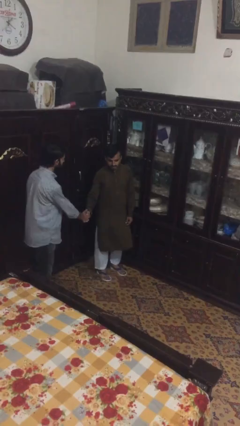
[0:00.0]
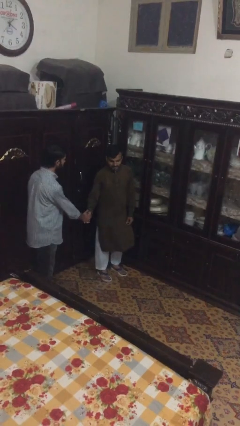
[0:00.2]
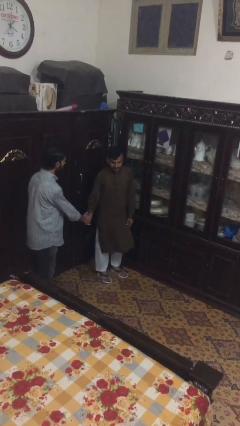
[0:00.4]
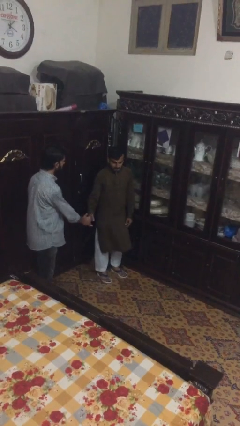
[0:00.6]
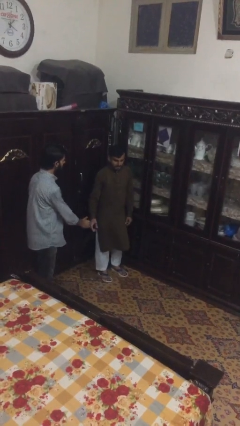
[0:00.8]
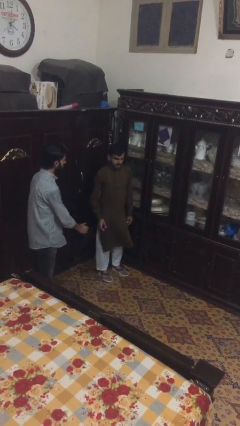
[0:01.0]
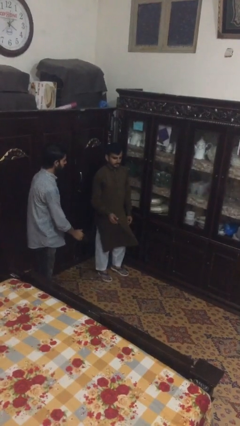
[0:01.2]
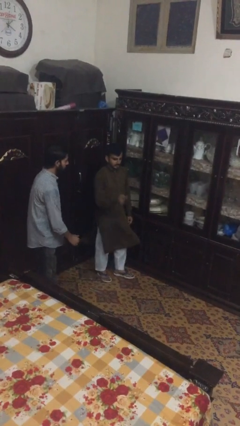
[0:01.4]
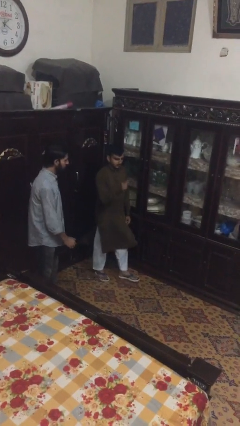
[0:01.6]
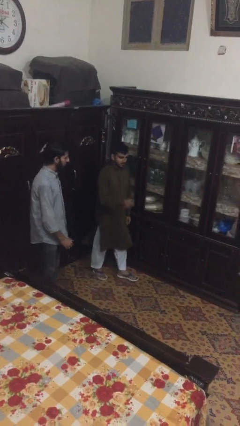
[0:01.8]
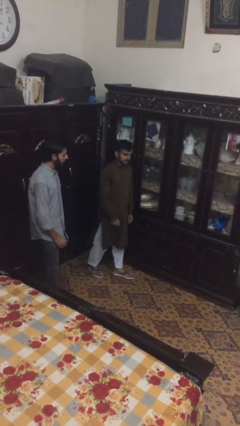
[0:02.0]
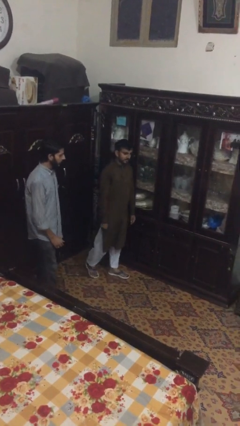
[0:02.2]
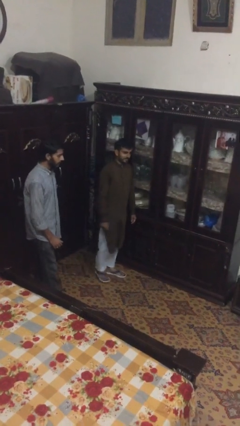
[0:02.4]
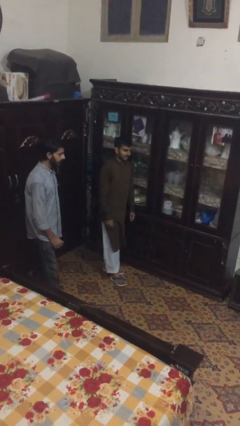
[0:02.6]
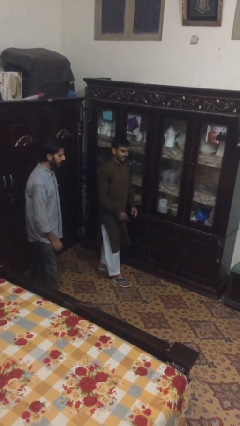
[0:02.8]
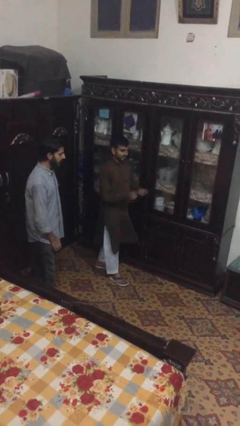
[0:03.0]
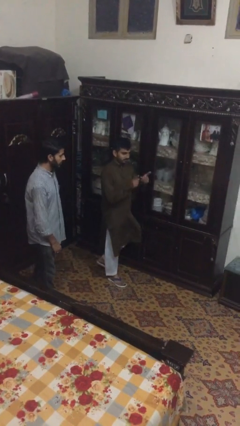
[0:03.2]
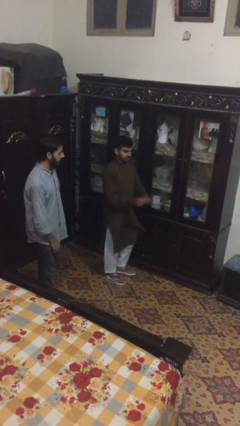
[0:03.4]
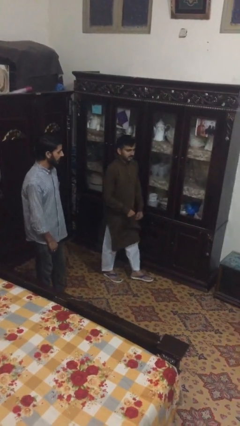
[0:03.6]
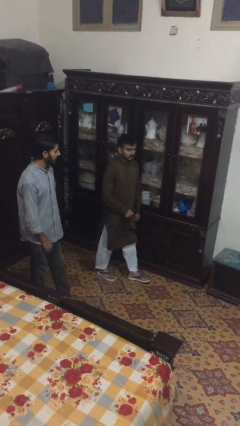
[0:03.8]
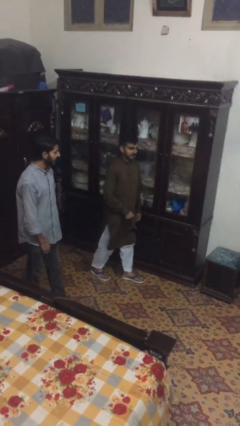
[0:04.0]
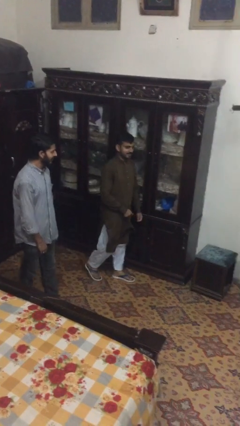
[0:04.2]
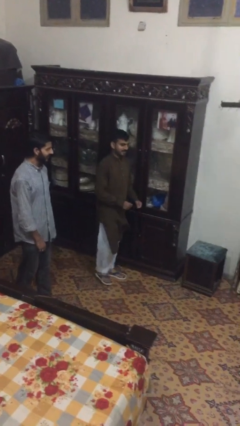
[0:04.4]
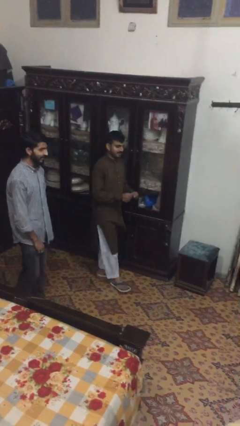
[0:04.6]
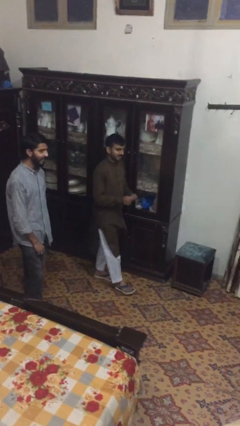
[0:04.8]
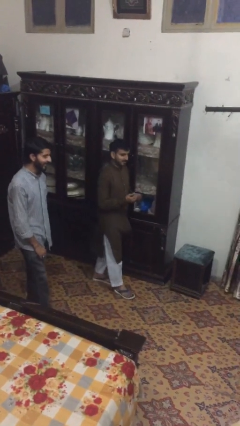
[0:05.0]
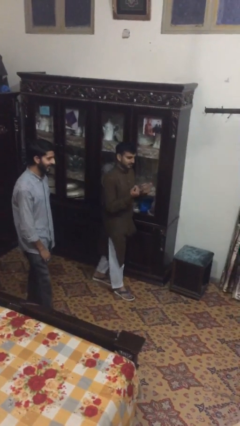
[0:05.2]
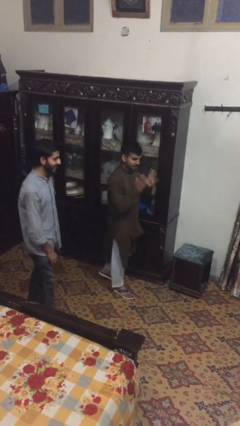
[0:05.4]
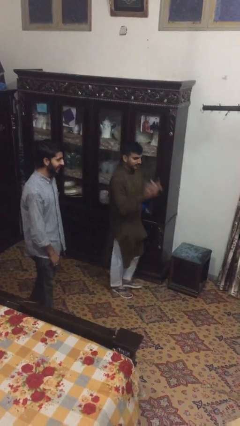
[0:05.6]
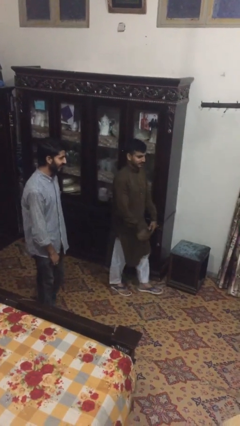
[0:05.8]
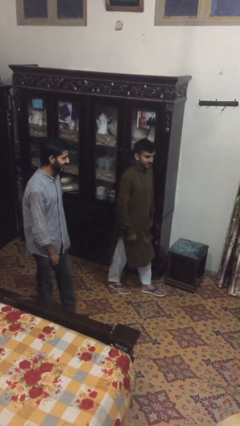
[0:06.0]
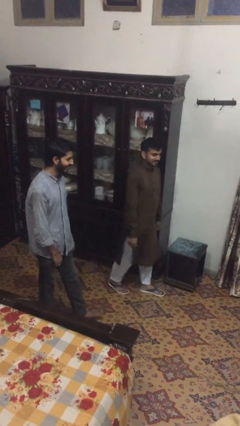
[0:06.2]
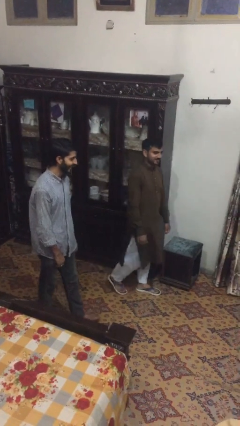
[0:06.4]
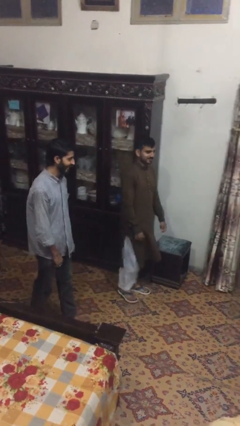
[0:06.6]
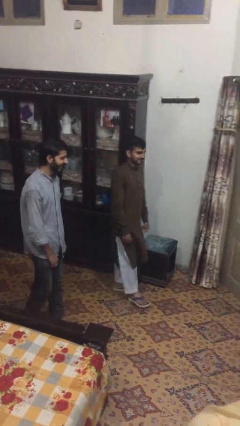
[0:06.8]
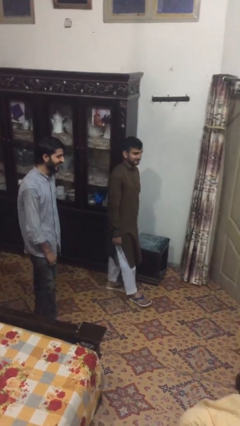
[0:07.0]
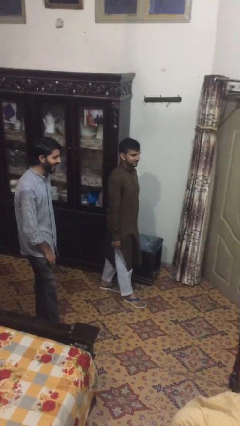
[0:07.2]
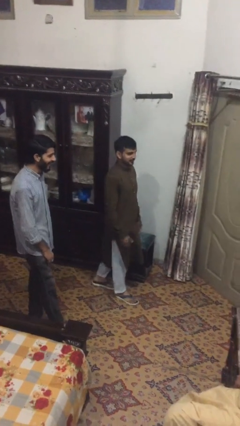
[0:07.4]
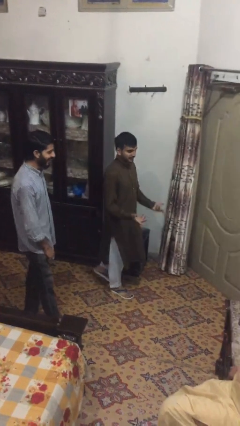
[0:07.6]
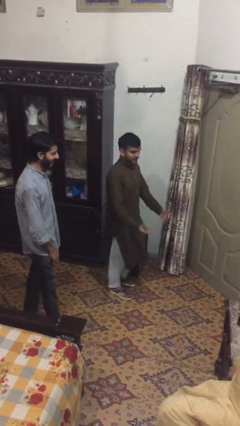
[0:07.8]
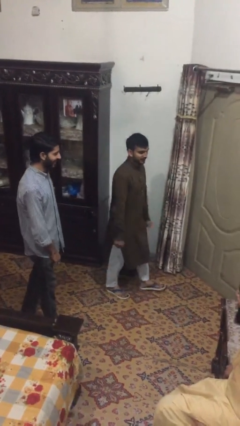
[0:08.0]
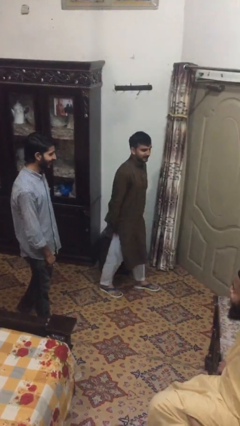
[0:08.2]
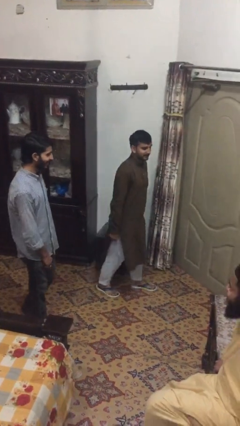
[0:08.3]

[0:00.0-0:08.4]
person talks to person

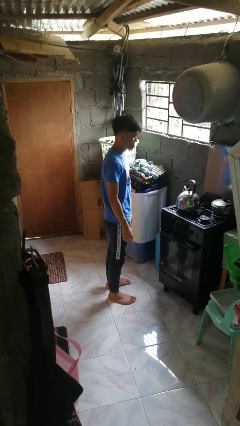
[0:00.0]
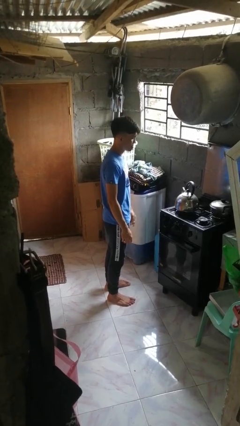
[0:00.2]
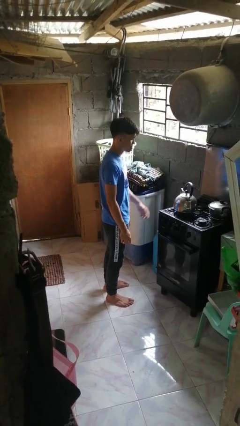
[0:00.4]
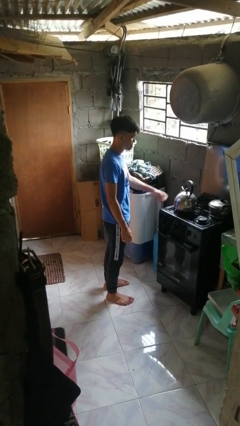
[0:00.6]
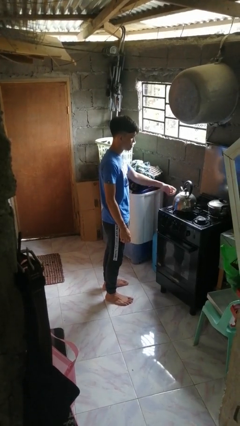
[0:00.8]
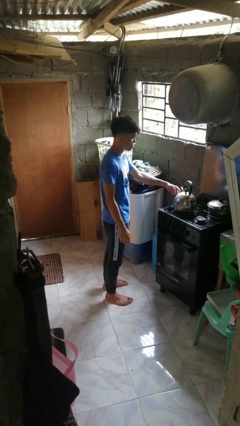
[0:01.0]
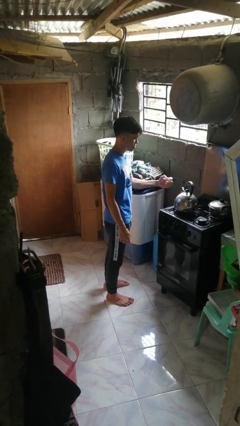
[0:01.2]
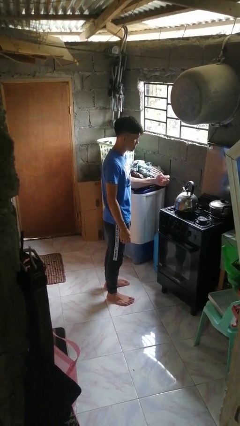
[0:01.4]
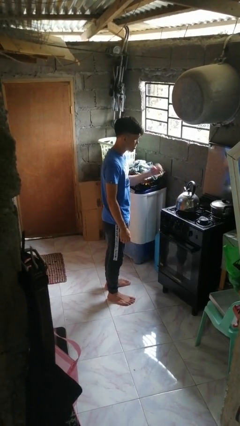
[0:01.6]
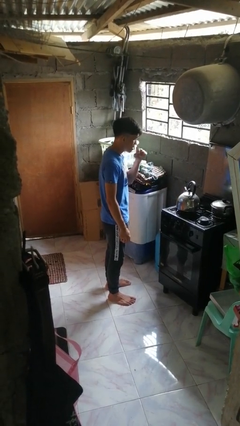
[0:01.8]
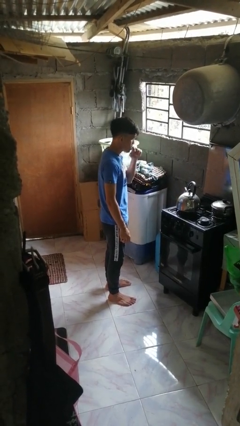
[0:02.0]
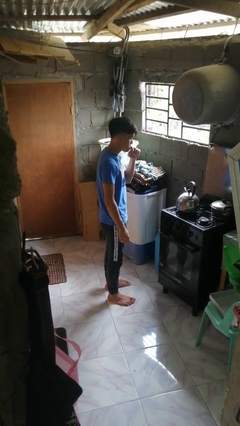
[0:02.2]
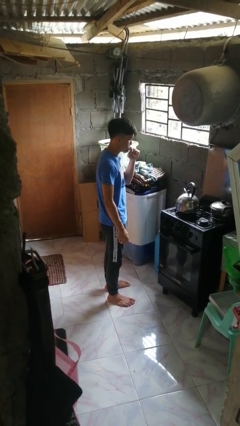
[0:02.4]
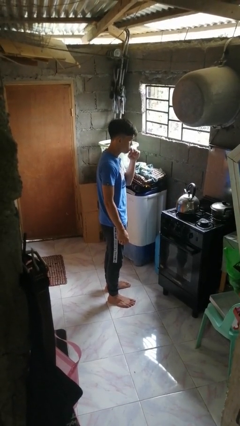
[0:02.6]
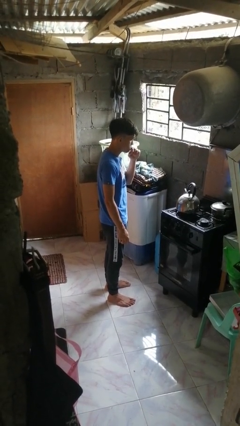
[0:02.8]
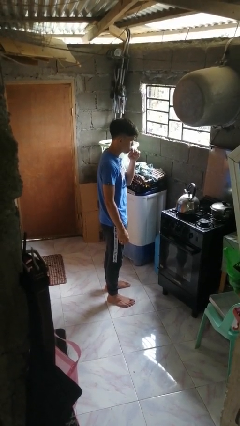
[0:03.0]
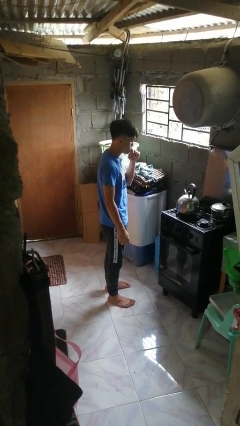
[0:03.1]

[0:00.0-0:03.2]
person burns hand

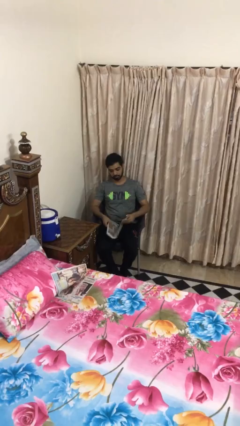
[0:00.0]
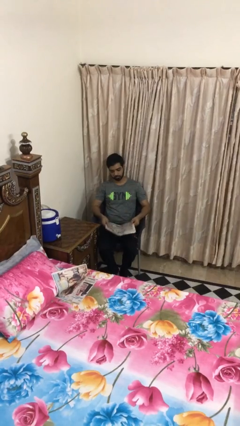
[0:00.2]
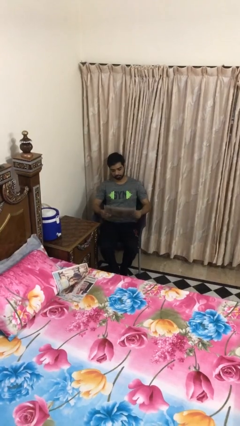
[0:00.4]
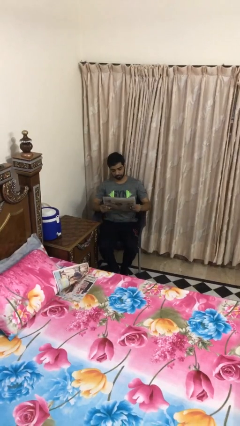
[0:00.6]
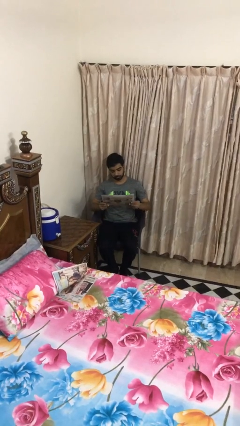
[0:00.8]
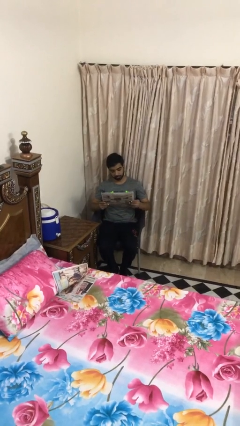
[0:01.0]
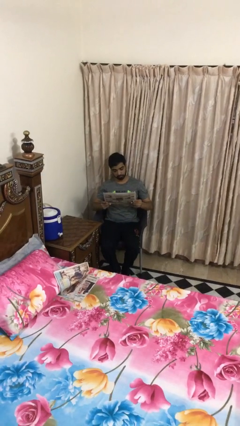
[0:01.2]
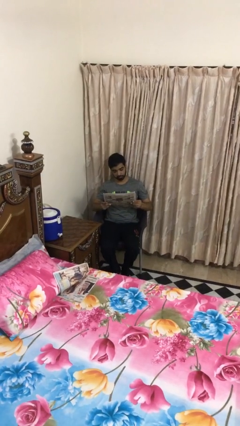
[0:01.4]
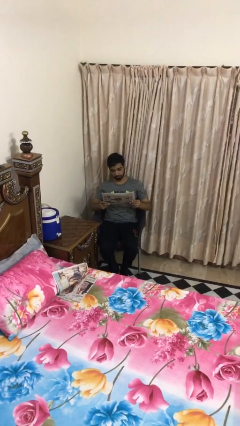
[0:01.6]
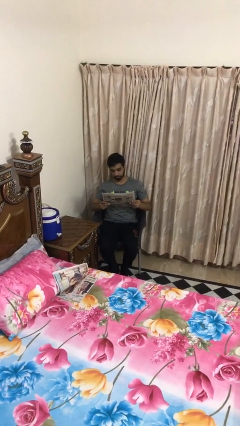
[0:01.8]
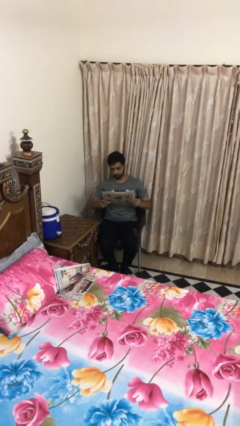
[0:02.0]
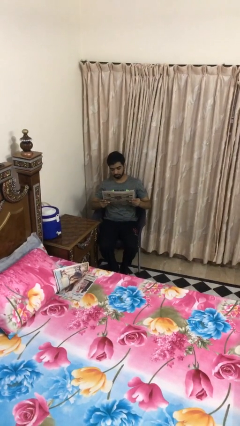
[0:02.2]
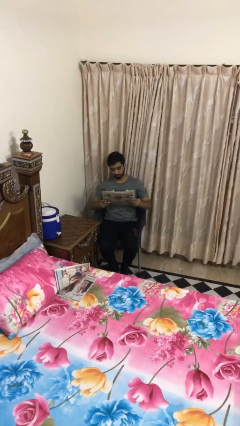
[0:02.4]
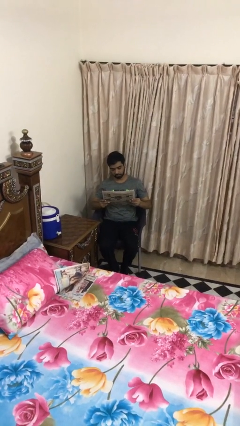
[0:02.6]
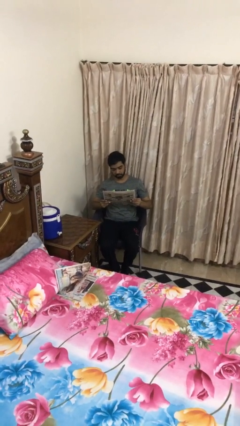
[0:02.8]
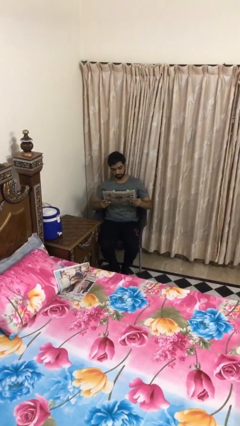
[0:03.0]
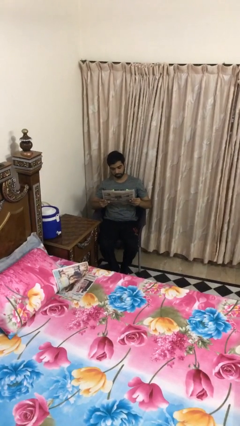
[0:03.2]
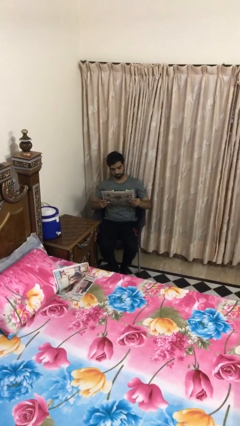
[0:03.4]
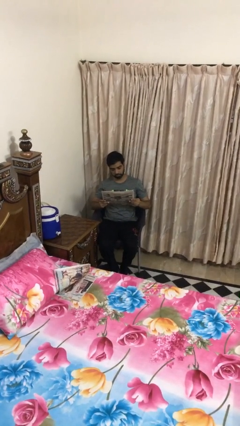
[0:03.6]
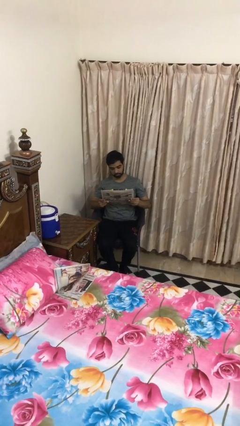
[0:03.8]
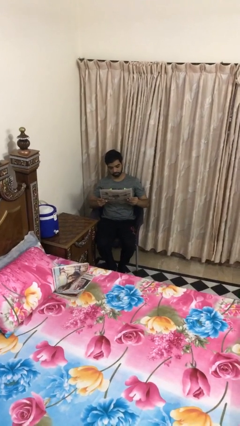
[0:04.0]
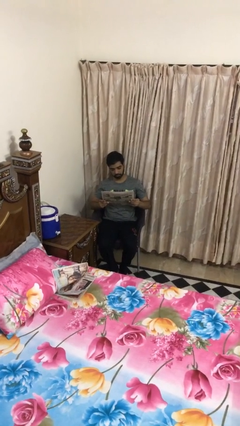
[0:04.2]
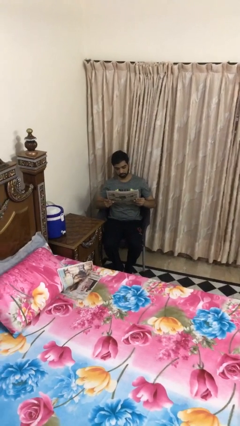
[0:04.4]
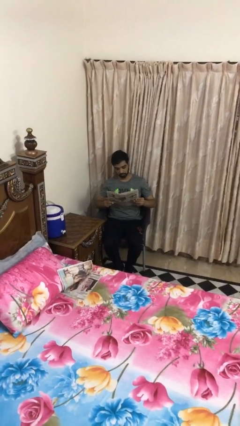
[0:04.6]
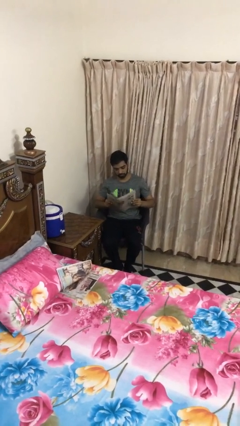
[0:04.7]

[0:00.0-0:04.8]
person reads document

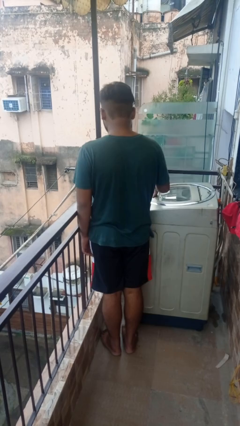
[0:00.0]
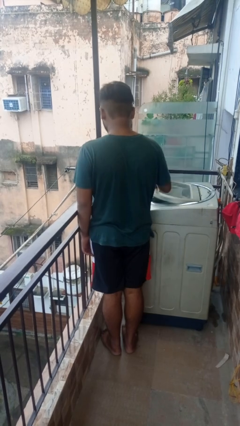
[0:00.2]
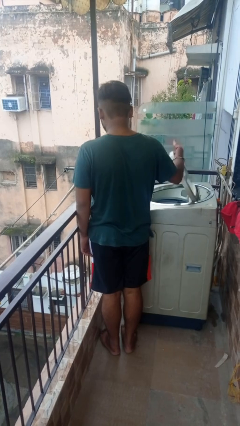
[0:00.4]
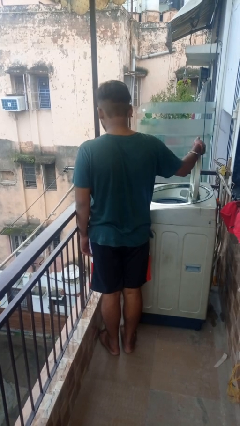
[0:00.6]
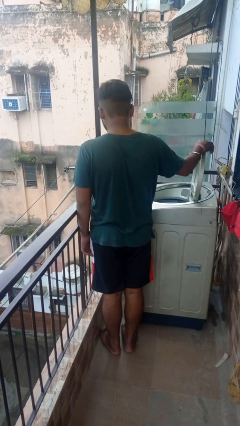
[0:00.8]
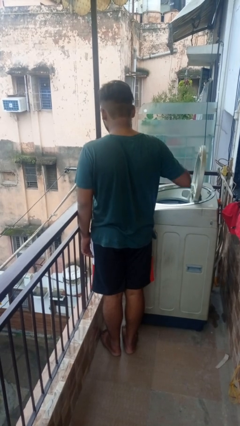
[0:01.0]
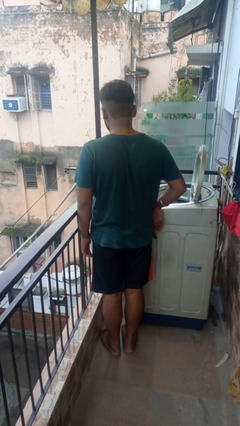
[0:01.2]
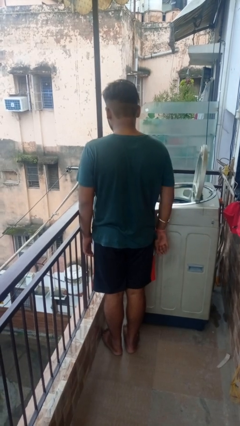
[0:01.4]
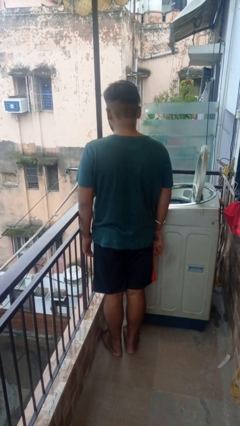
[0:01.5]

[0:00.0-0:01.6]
person opens clothes washer
